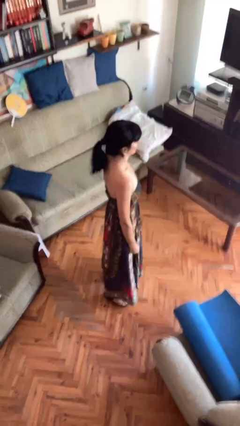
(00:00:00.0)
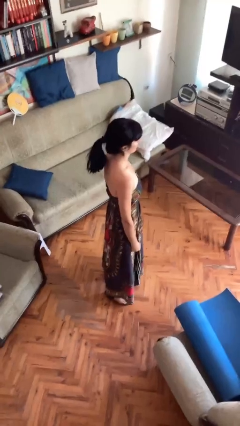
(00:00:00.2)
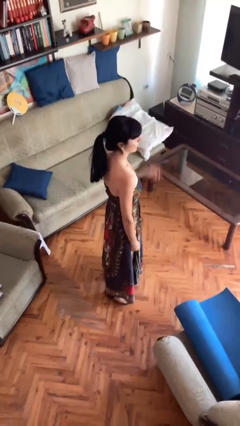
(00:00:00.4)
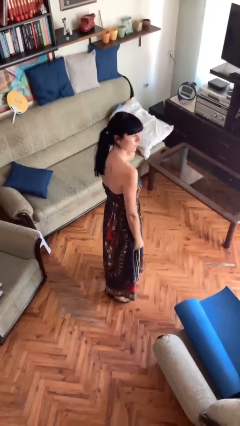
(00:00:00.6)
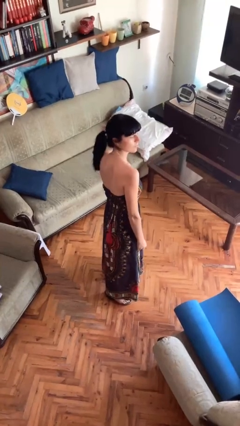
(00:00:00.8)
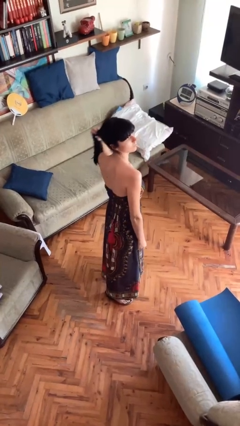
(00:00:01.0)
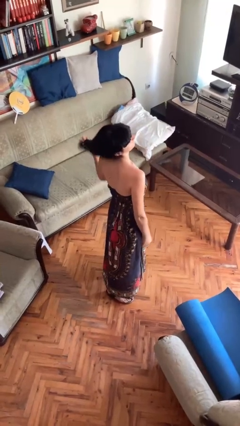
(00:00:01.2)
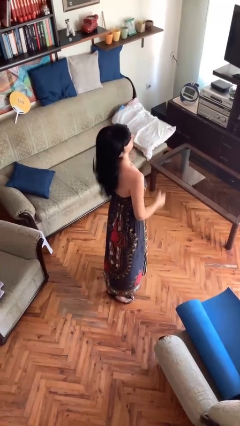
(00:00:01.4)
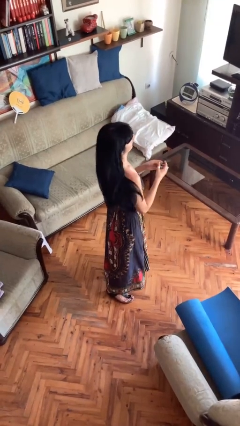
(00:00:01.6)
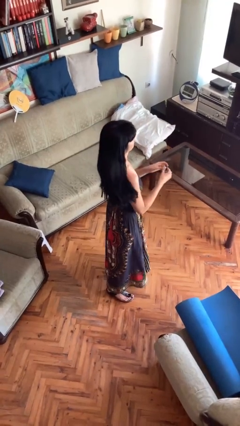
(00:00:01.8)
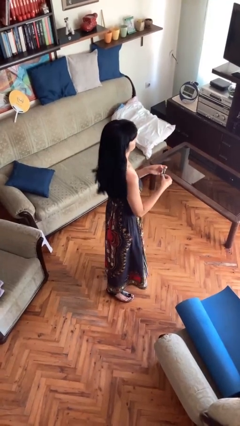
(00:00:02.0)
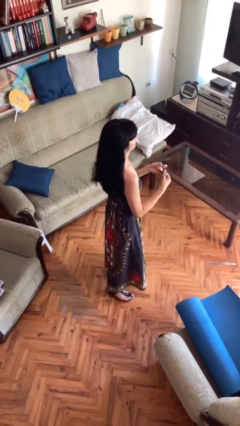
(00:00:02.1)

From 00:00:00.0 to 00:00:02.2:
person takes off hairtie

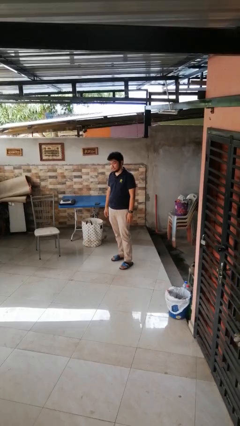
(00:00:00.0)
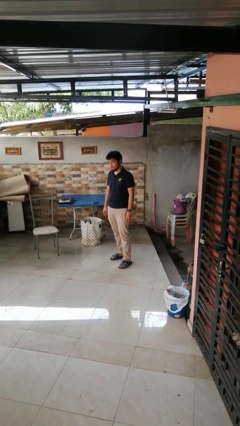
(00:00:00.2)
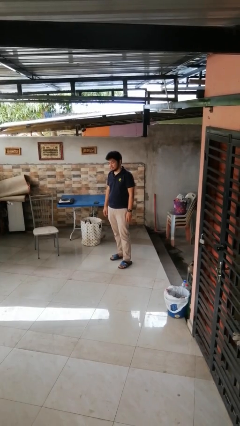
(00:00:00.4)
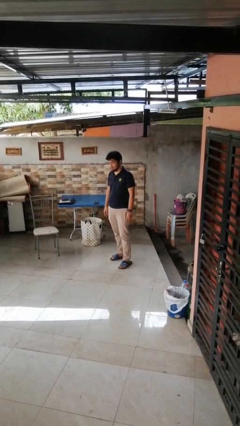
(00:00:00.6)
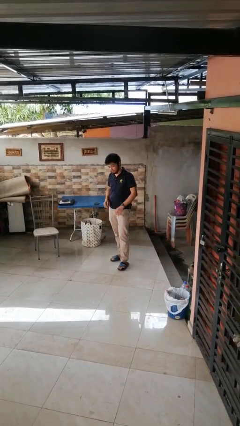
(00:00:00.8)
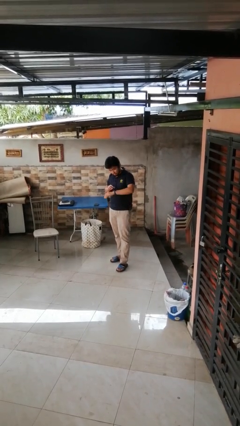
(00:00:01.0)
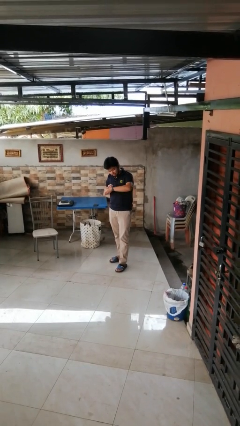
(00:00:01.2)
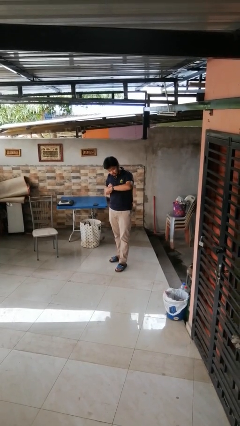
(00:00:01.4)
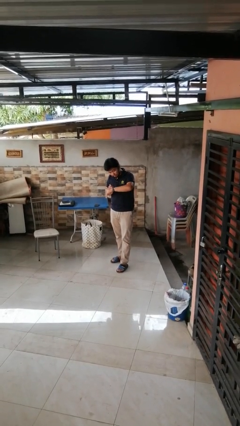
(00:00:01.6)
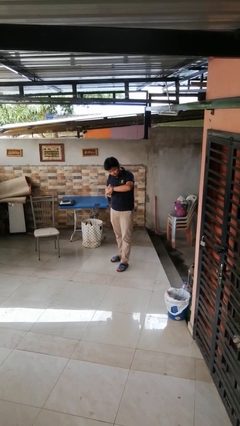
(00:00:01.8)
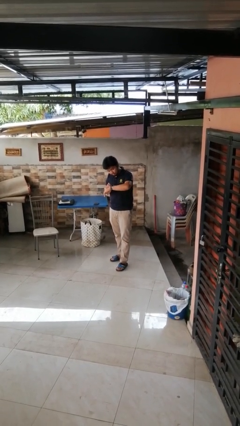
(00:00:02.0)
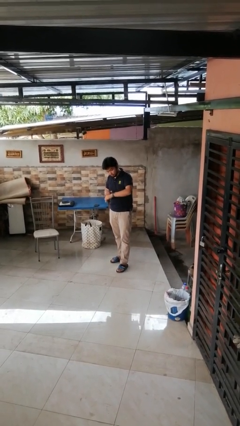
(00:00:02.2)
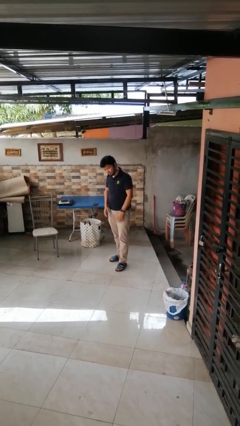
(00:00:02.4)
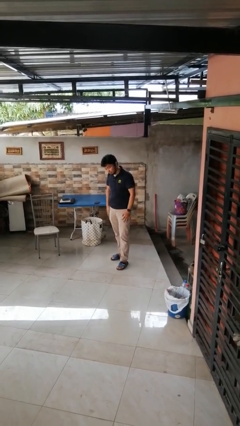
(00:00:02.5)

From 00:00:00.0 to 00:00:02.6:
person looks at wristwatch

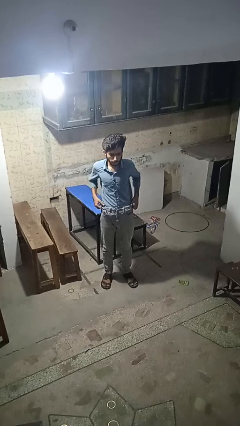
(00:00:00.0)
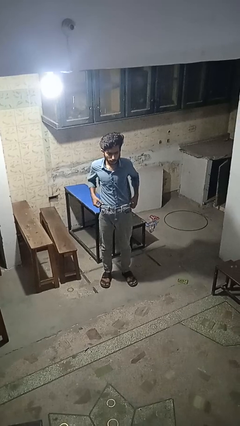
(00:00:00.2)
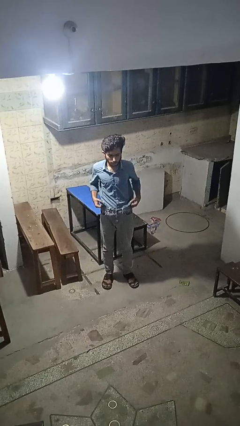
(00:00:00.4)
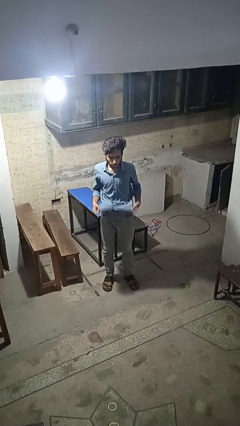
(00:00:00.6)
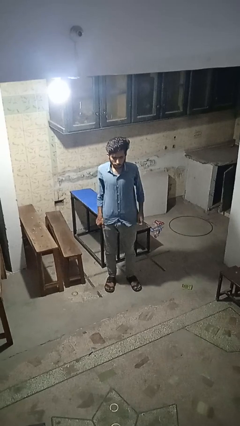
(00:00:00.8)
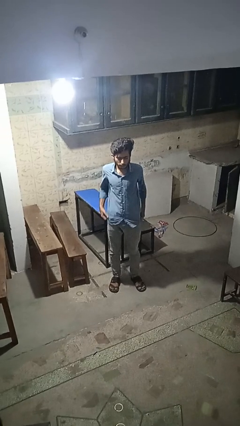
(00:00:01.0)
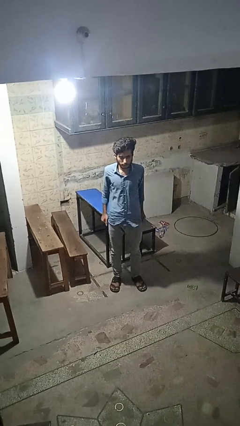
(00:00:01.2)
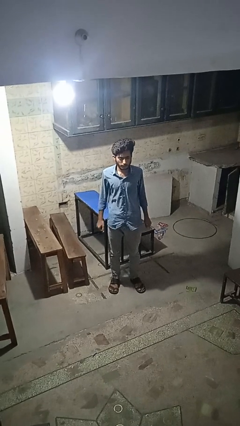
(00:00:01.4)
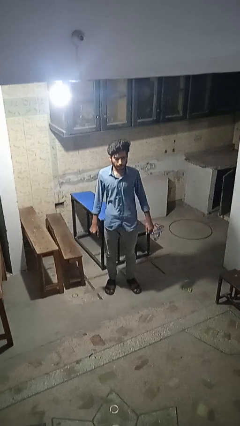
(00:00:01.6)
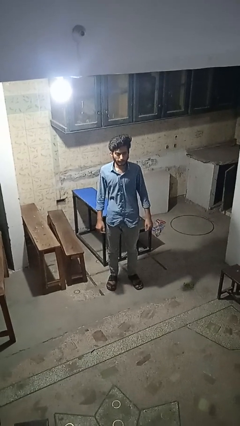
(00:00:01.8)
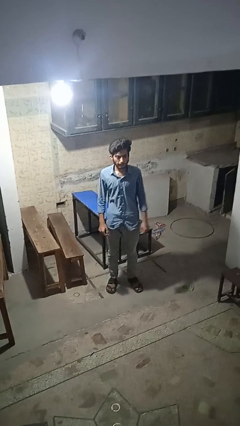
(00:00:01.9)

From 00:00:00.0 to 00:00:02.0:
person untucks shirt

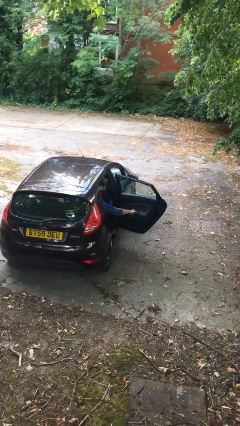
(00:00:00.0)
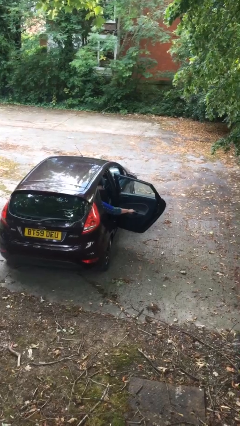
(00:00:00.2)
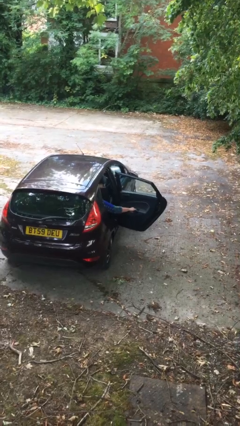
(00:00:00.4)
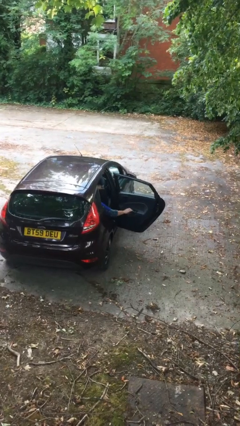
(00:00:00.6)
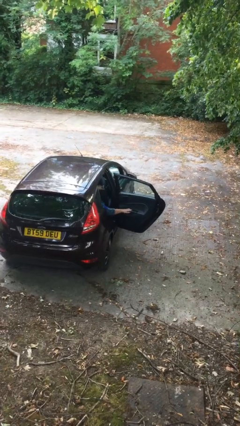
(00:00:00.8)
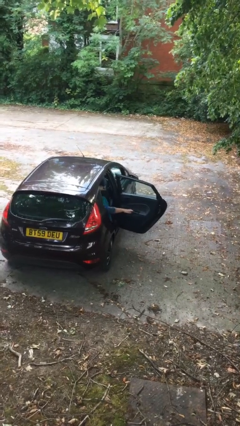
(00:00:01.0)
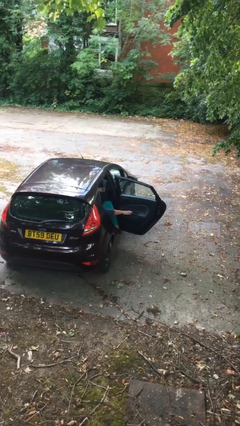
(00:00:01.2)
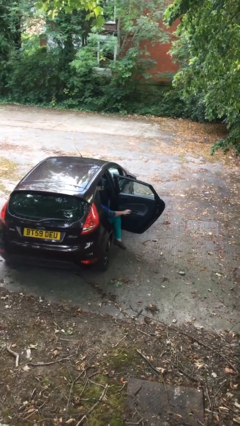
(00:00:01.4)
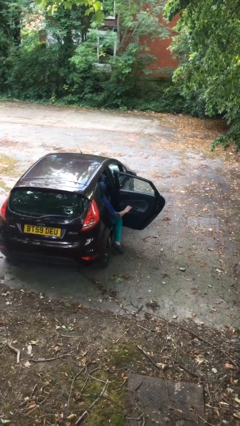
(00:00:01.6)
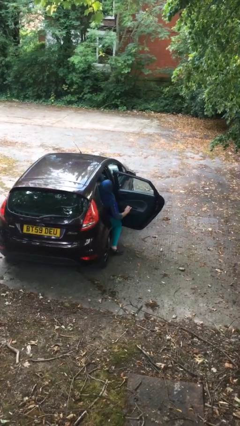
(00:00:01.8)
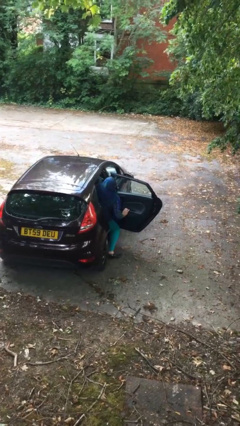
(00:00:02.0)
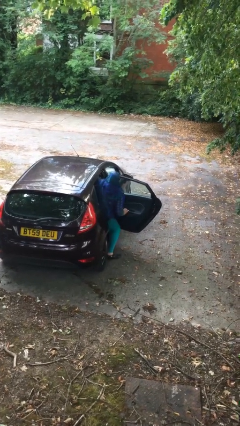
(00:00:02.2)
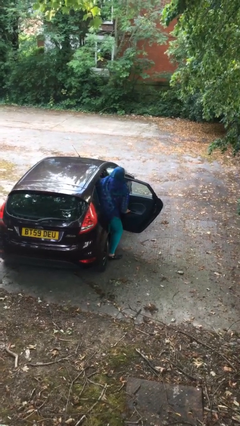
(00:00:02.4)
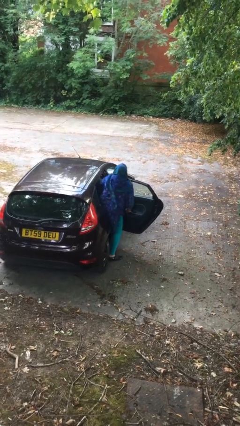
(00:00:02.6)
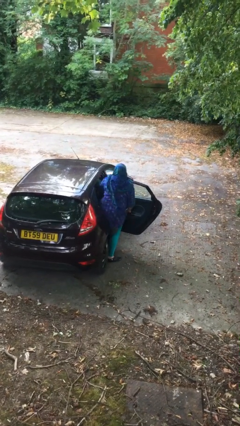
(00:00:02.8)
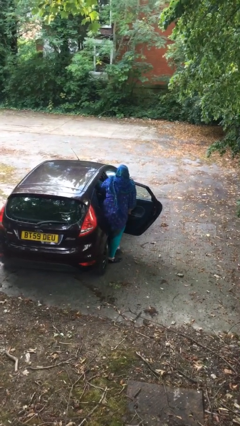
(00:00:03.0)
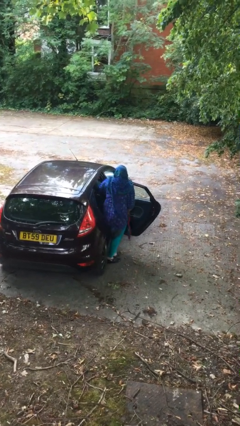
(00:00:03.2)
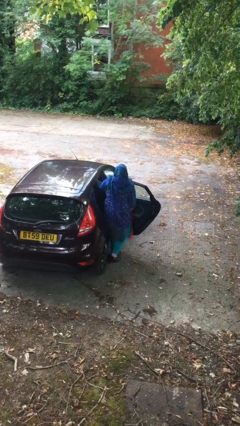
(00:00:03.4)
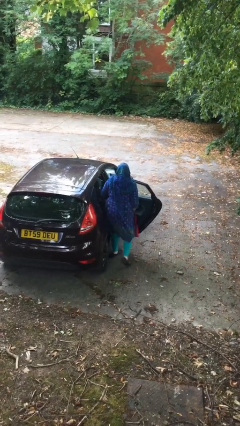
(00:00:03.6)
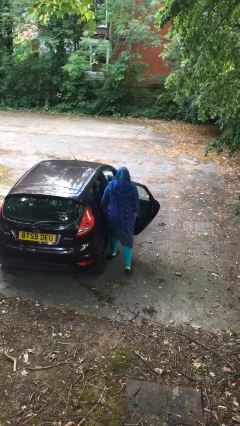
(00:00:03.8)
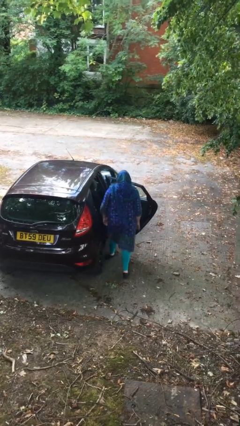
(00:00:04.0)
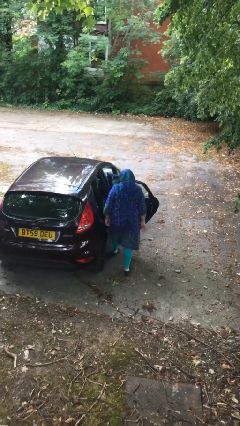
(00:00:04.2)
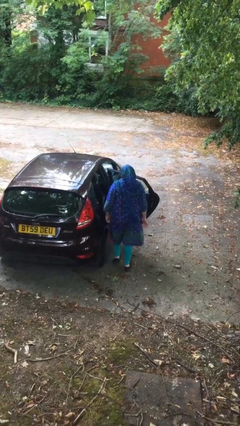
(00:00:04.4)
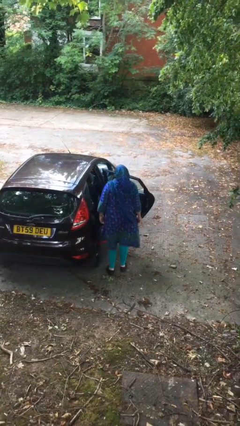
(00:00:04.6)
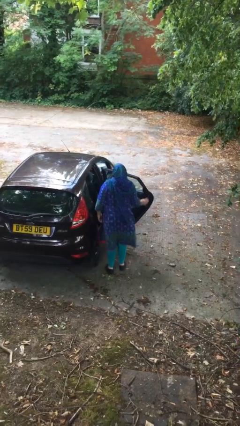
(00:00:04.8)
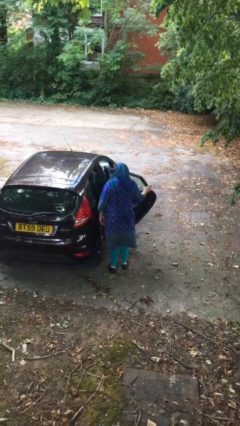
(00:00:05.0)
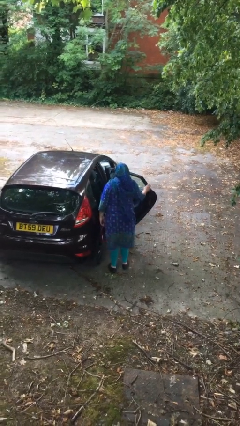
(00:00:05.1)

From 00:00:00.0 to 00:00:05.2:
person exits car

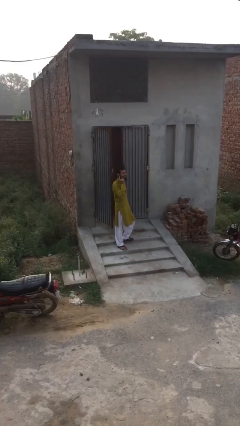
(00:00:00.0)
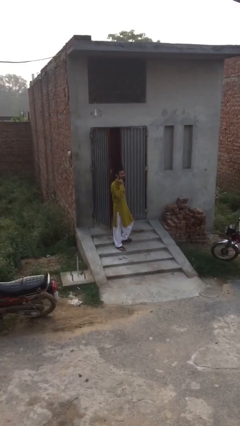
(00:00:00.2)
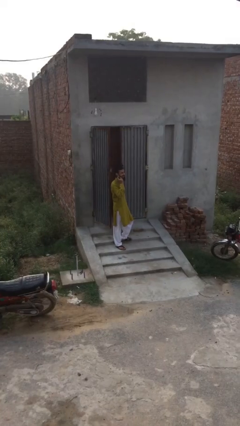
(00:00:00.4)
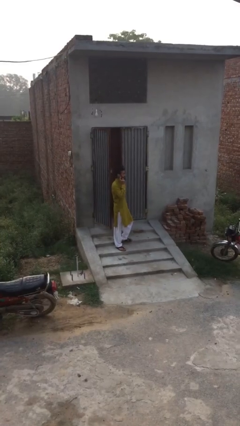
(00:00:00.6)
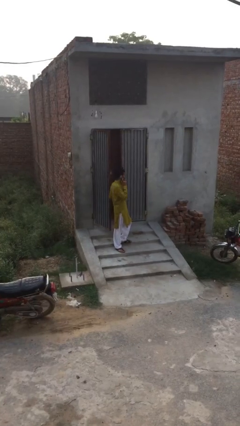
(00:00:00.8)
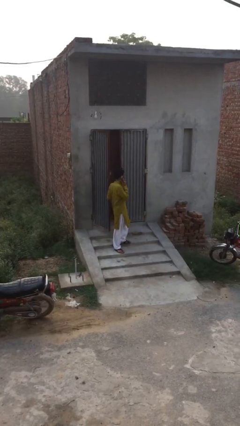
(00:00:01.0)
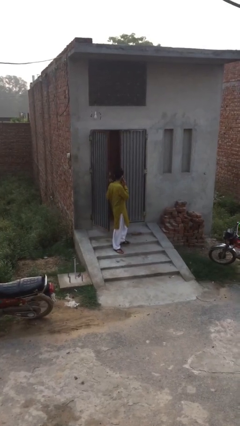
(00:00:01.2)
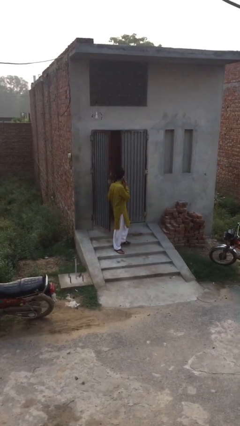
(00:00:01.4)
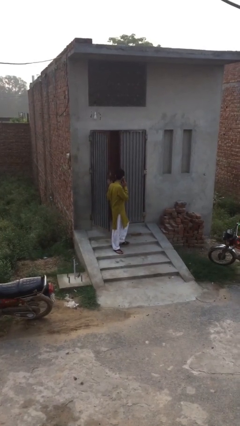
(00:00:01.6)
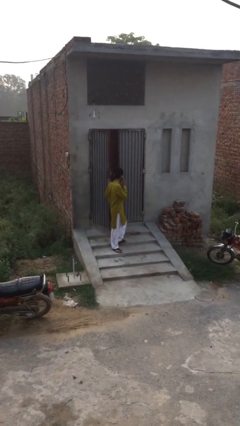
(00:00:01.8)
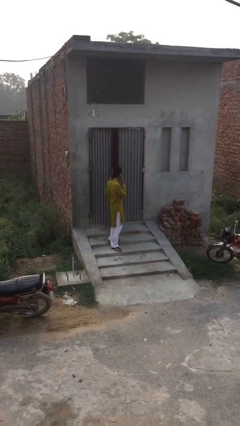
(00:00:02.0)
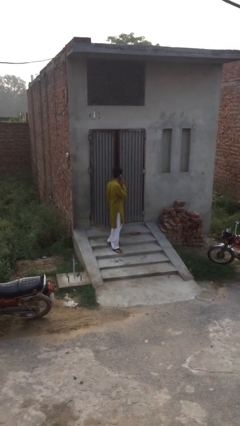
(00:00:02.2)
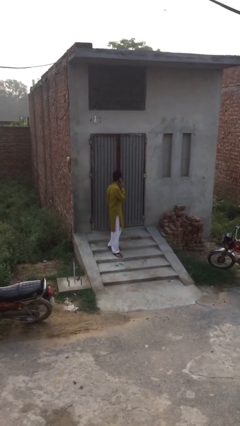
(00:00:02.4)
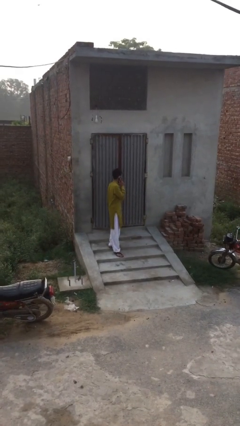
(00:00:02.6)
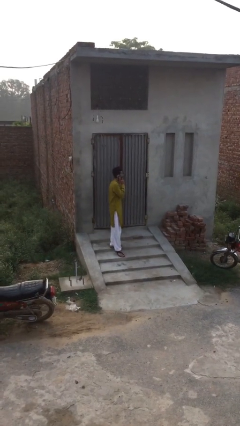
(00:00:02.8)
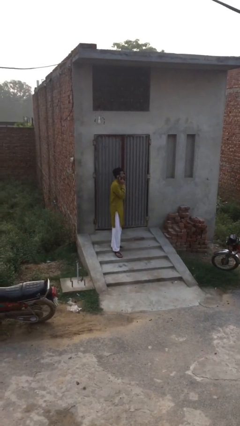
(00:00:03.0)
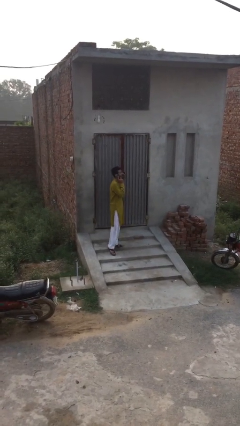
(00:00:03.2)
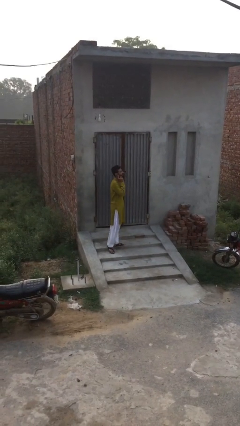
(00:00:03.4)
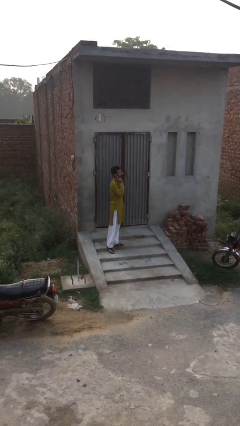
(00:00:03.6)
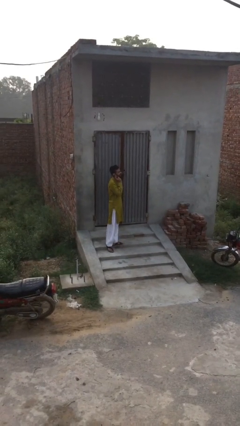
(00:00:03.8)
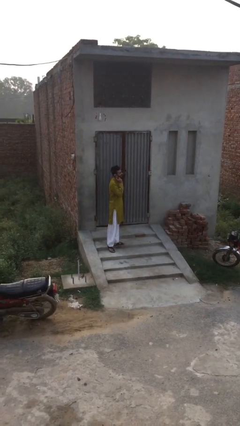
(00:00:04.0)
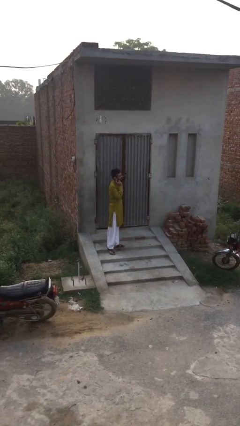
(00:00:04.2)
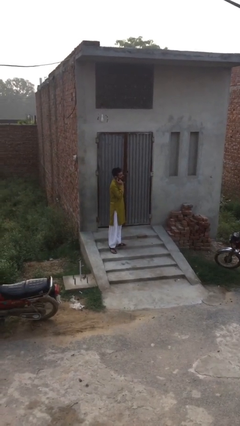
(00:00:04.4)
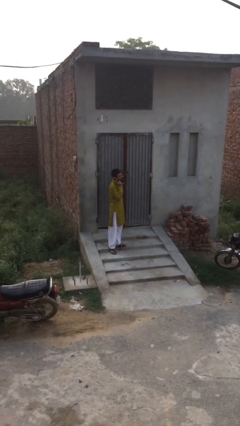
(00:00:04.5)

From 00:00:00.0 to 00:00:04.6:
person closes facility door

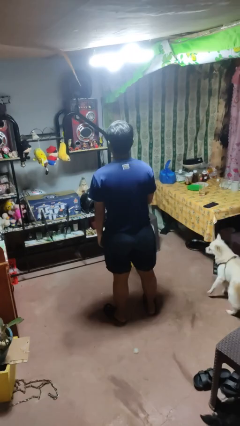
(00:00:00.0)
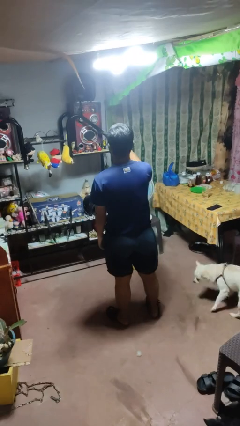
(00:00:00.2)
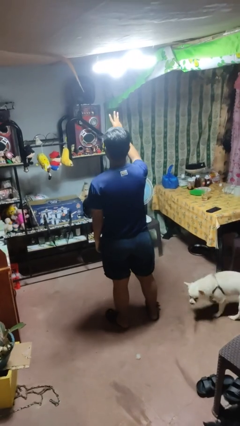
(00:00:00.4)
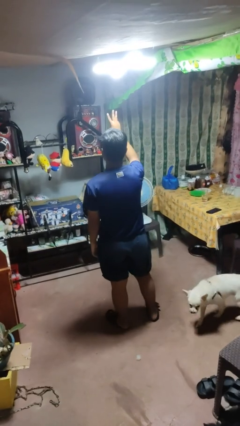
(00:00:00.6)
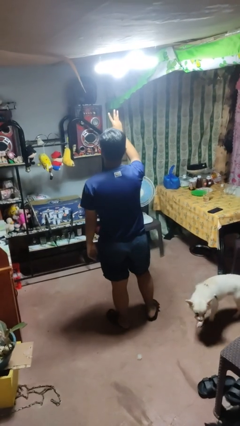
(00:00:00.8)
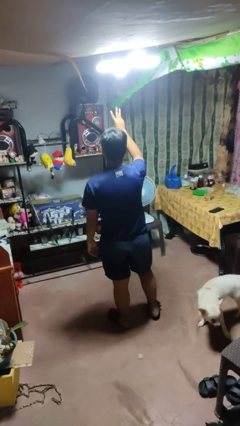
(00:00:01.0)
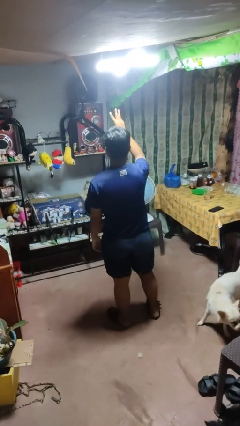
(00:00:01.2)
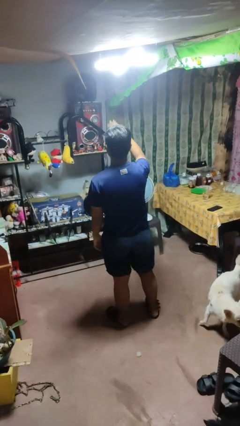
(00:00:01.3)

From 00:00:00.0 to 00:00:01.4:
person gestures number three
